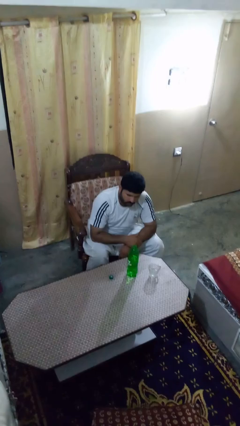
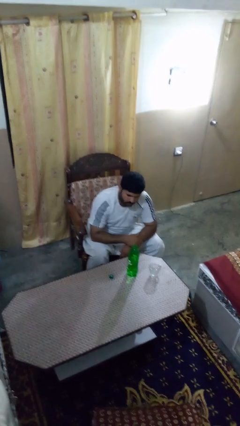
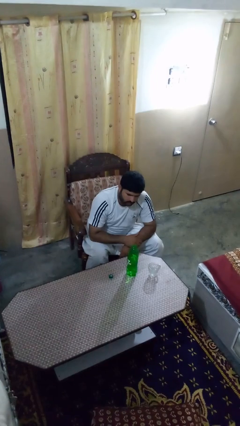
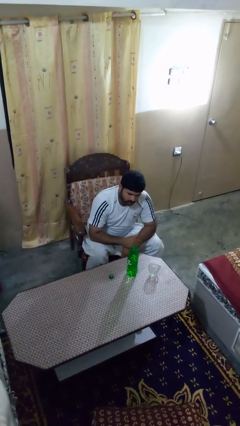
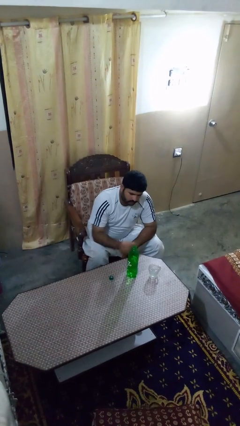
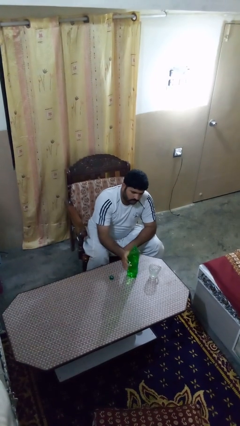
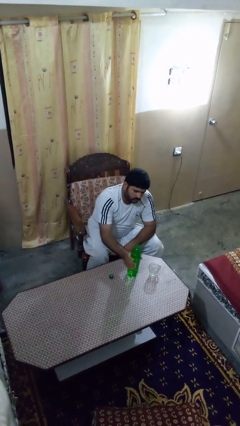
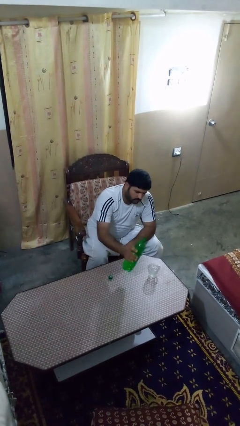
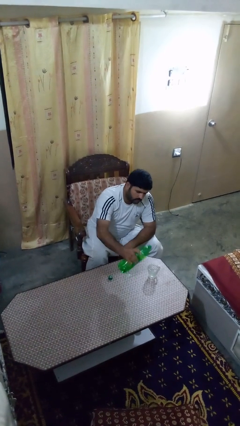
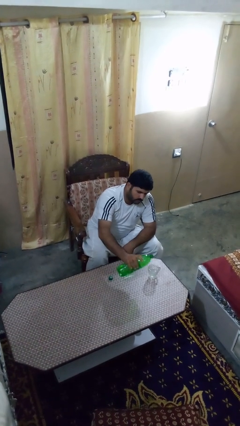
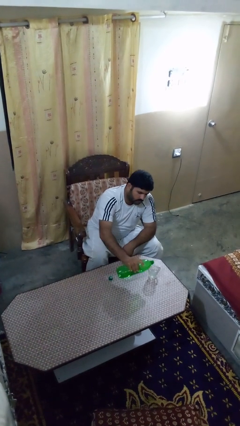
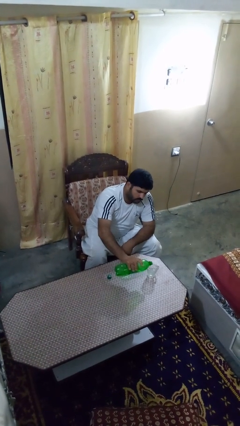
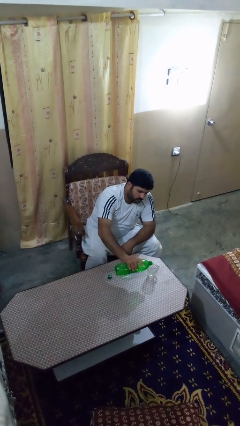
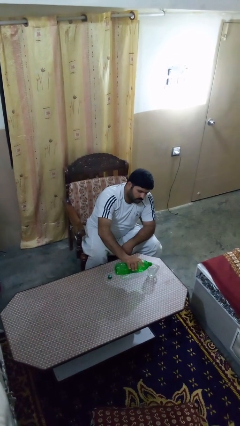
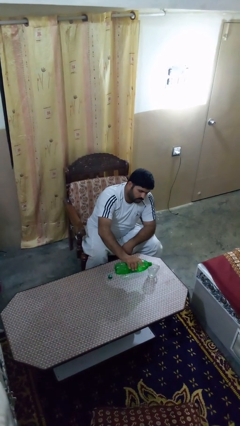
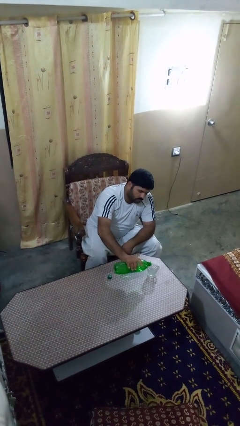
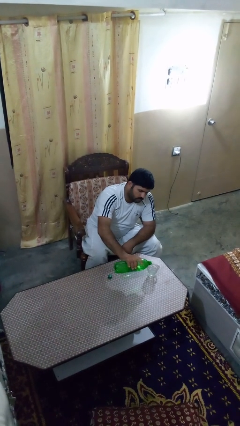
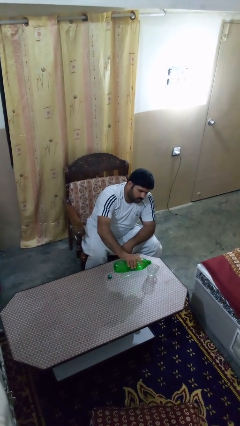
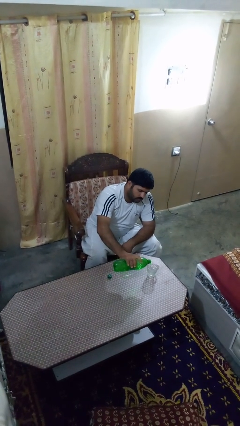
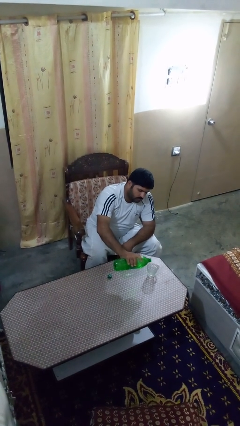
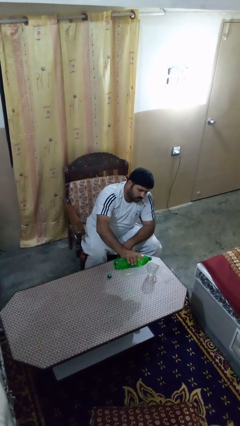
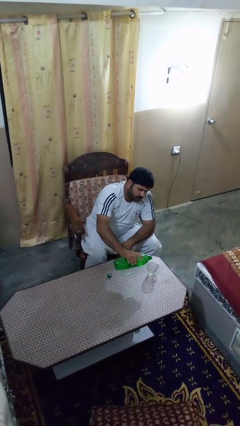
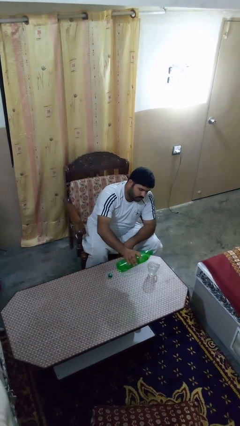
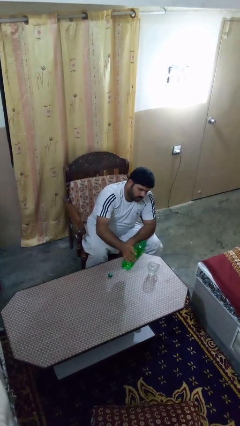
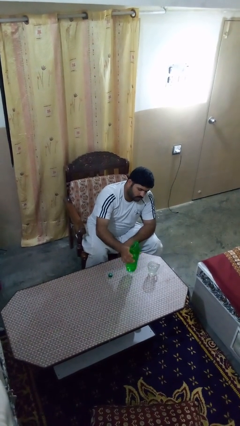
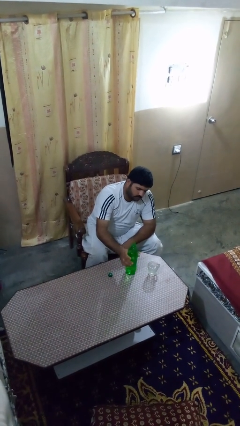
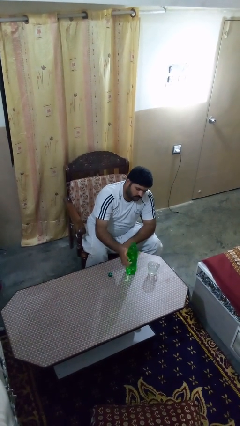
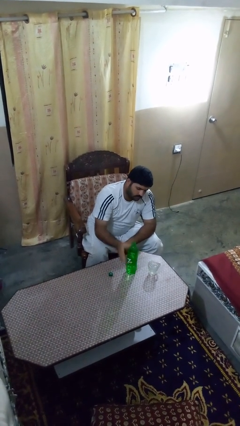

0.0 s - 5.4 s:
person pours liquid into cup

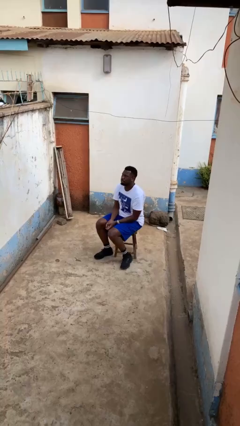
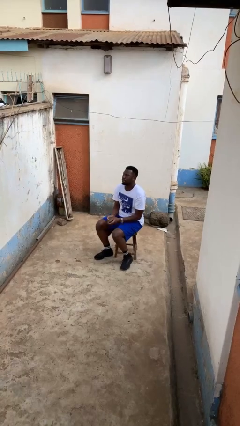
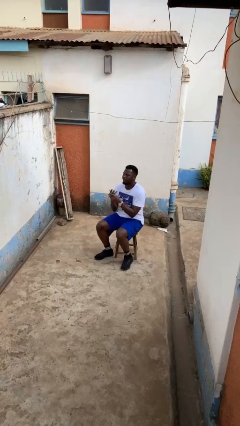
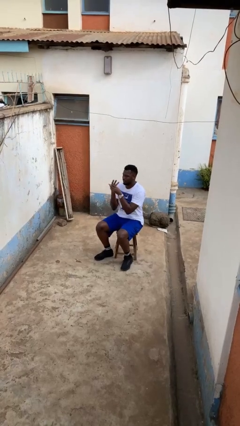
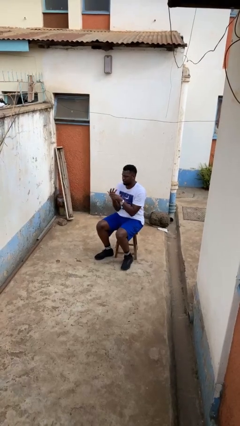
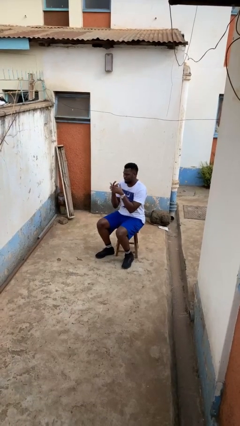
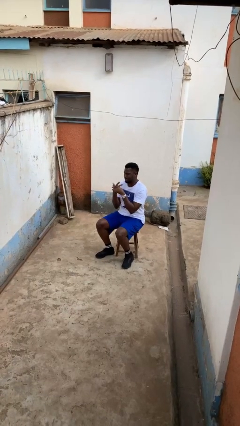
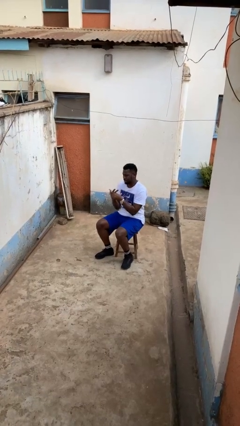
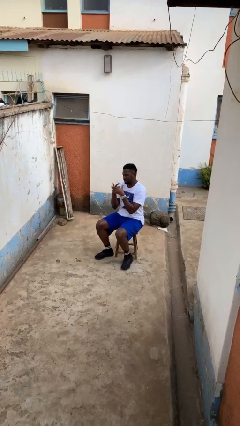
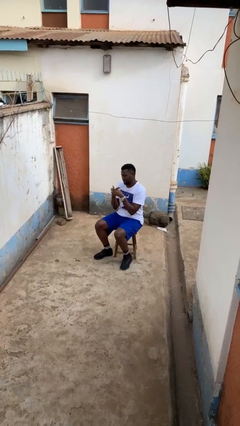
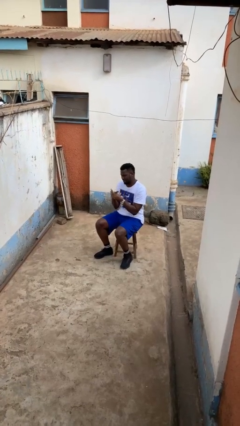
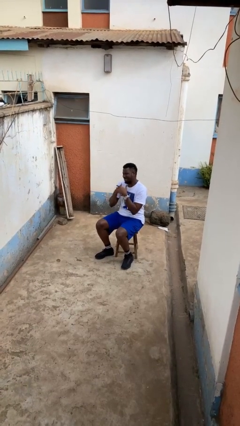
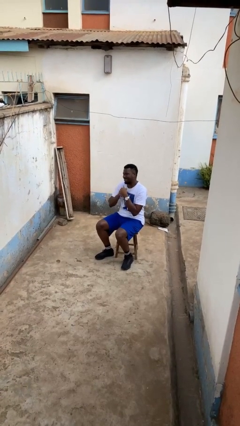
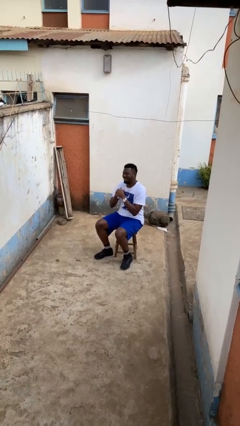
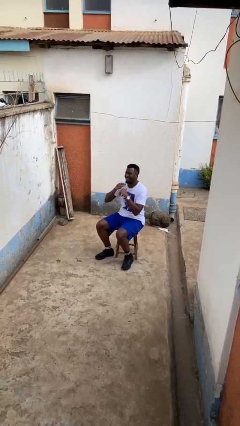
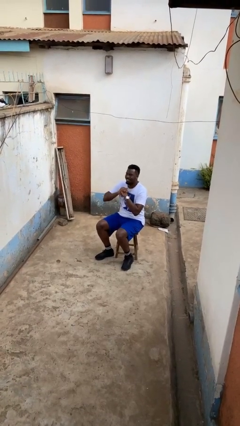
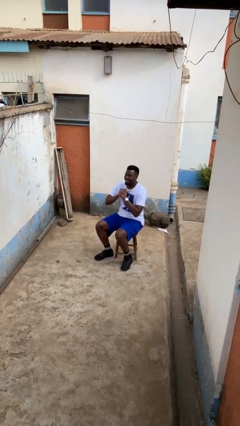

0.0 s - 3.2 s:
person cracks knuckles

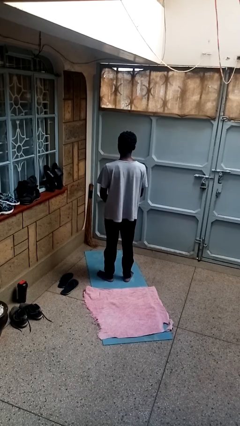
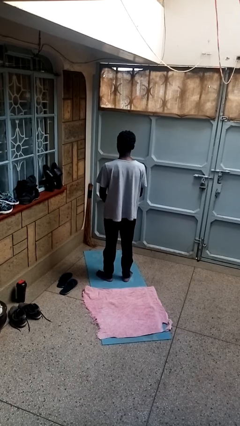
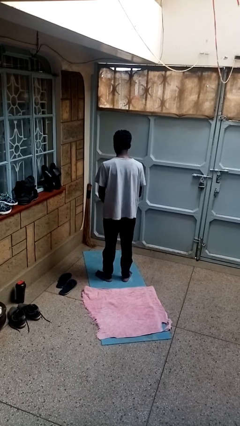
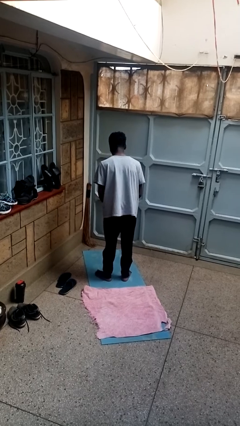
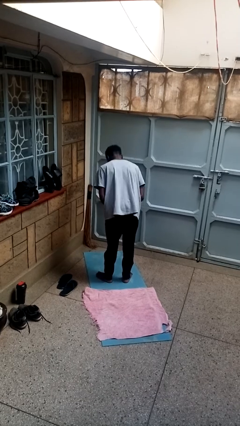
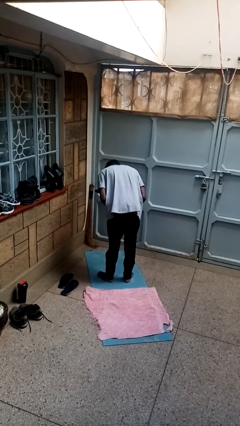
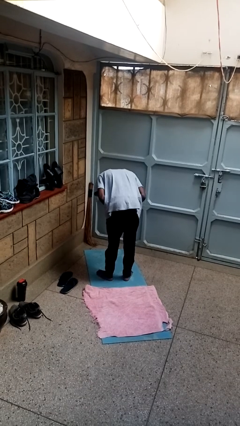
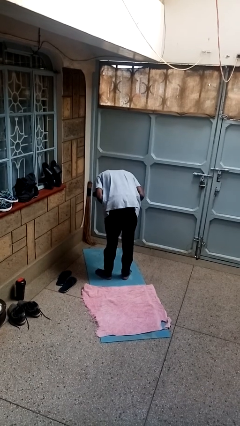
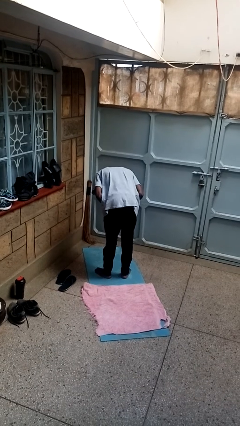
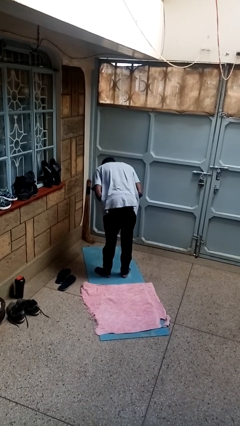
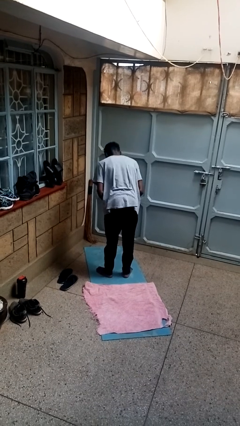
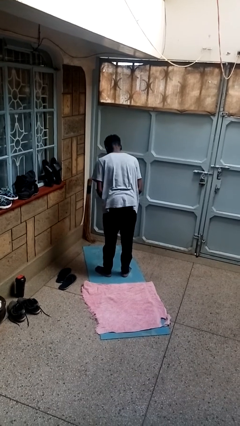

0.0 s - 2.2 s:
person bows

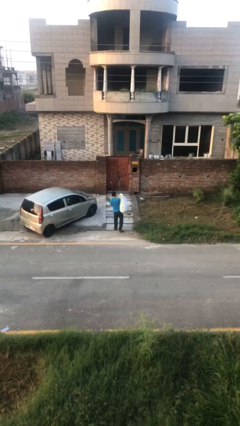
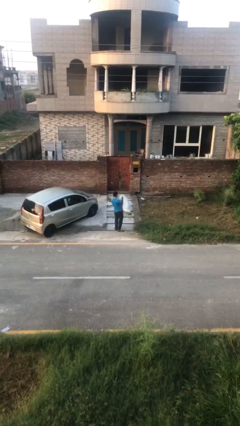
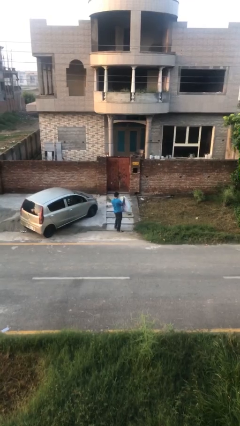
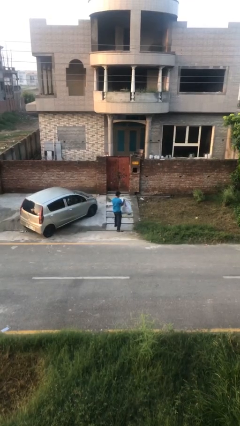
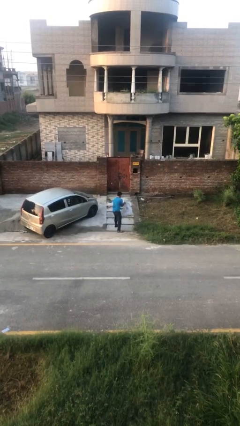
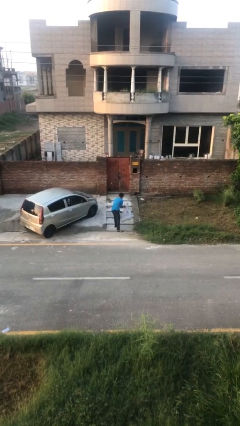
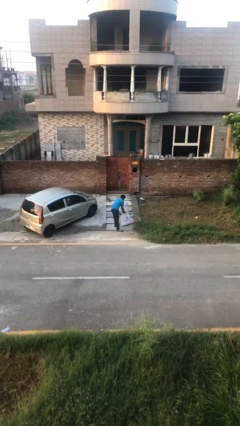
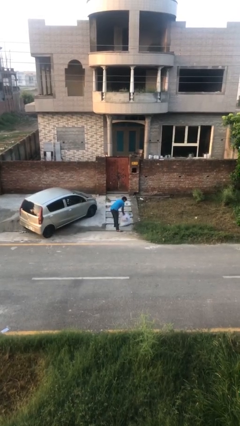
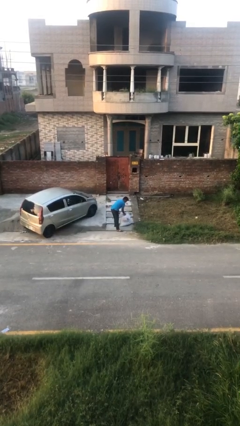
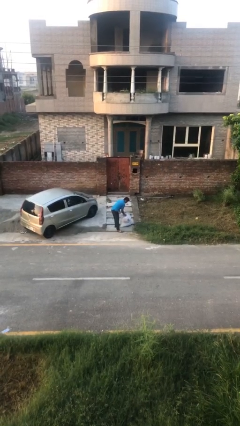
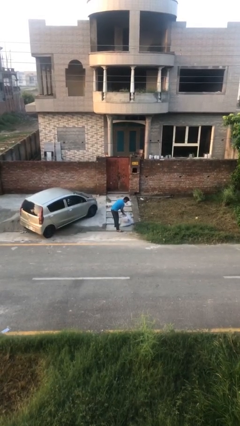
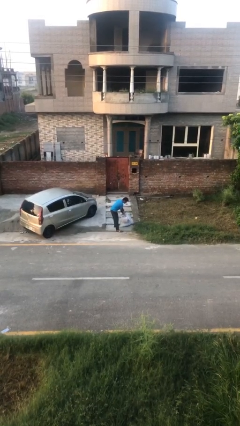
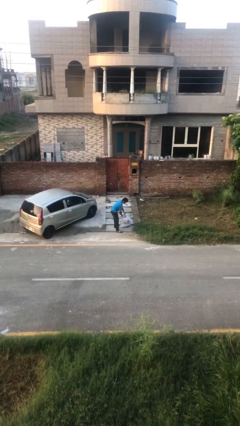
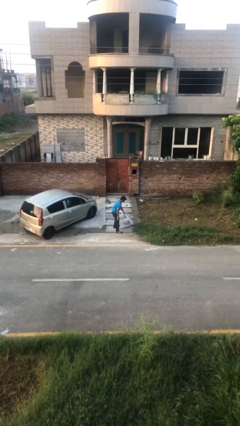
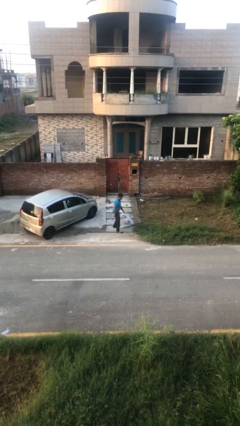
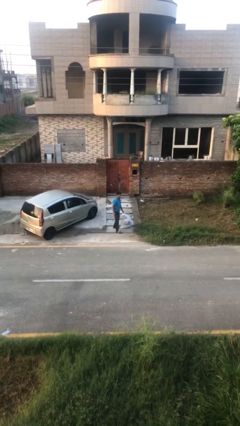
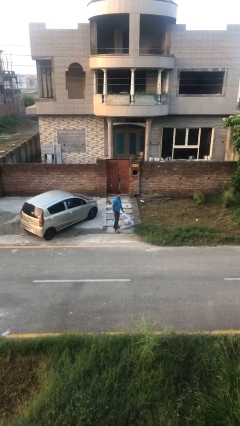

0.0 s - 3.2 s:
person puts down object on floor

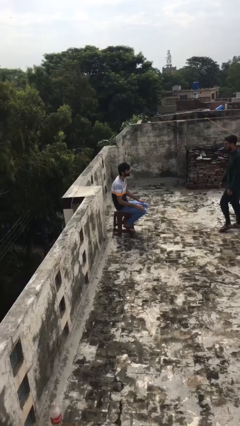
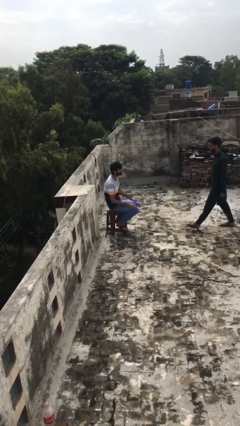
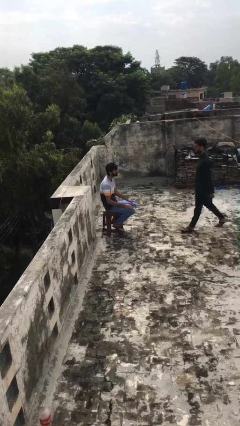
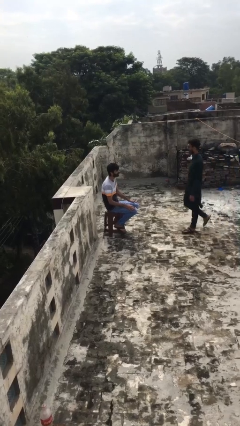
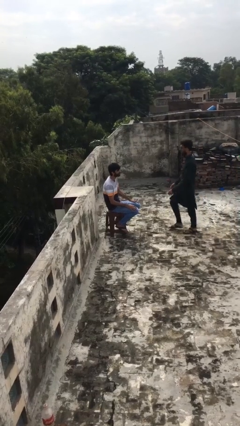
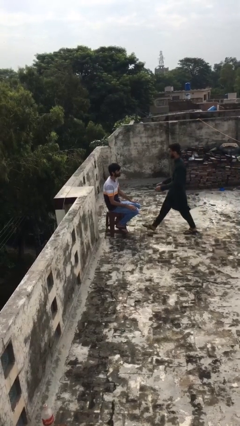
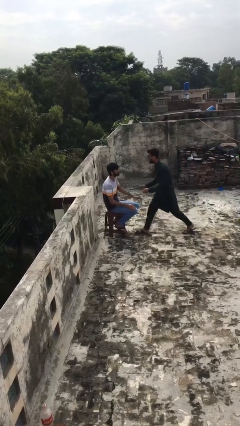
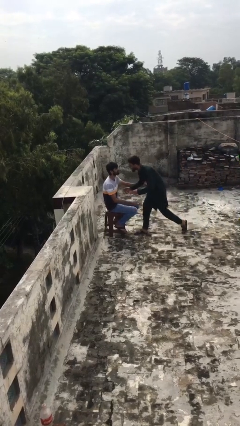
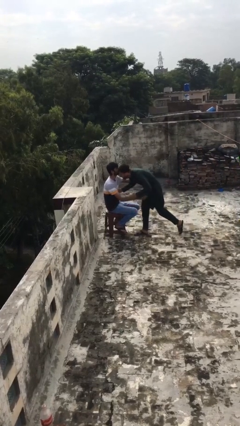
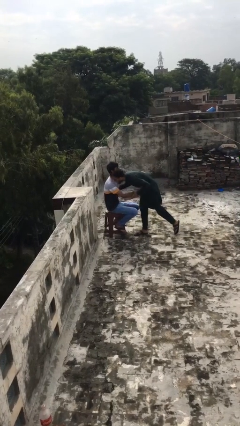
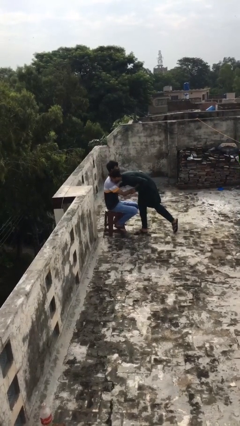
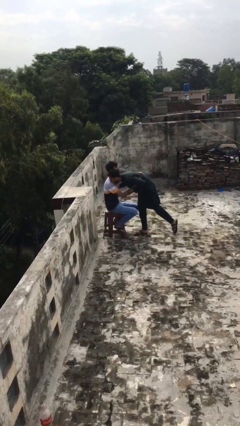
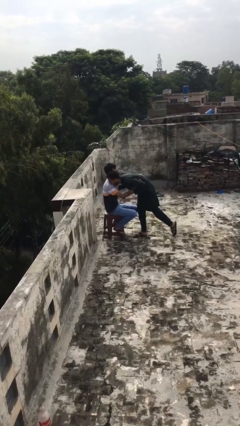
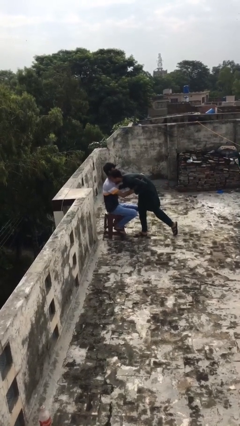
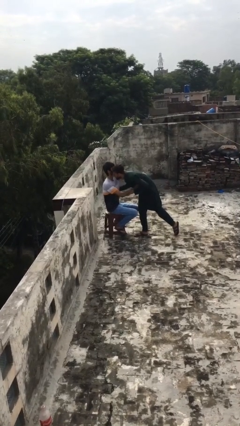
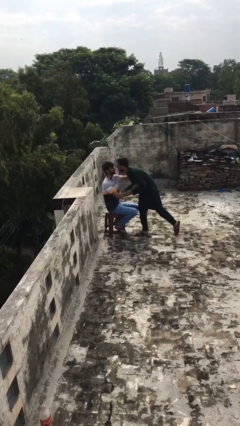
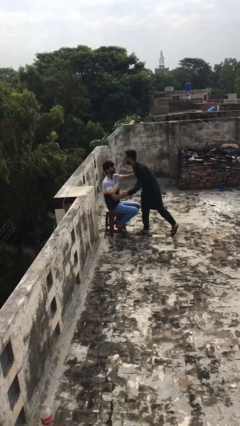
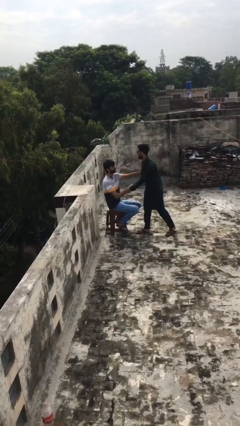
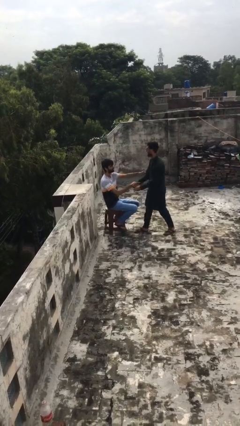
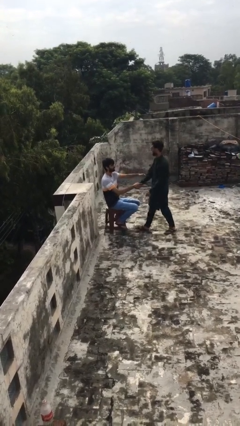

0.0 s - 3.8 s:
person embraces person
